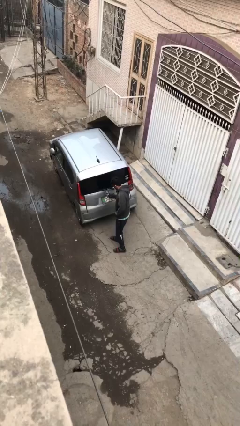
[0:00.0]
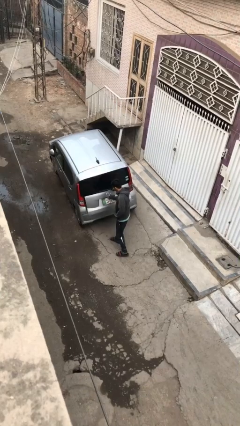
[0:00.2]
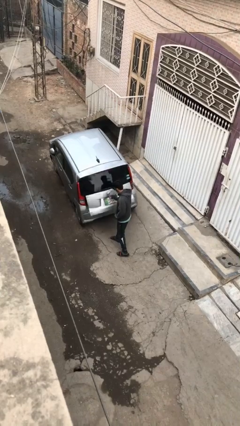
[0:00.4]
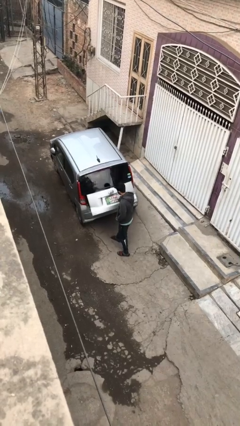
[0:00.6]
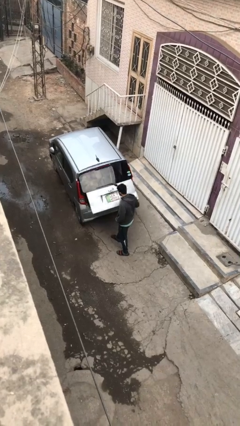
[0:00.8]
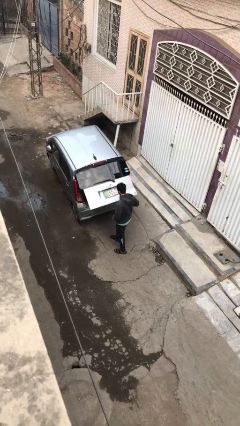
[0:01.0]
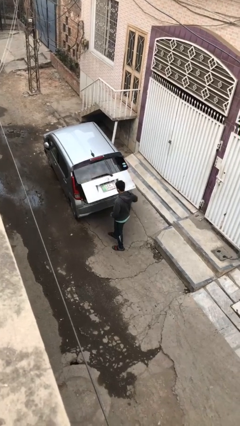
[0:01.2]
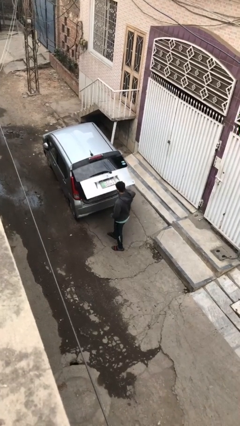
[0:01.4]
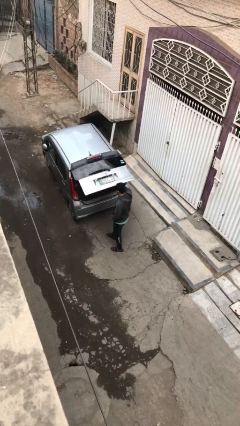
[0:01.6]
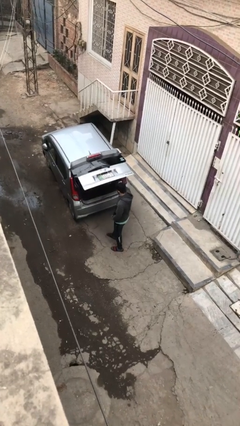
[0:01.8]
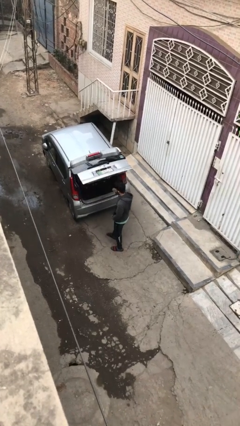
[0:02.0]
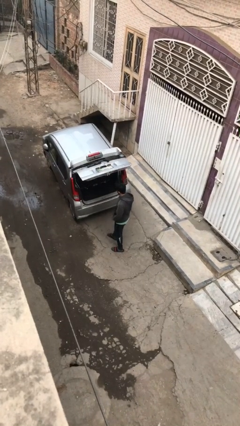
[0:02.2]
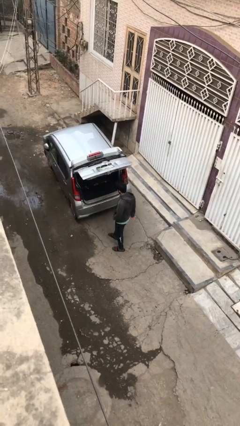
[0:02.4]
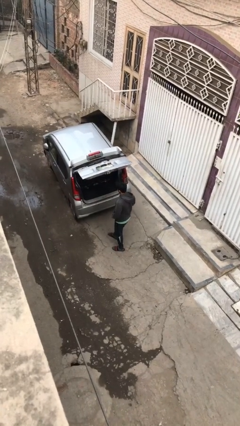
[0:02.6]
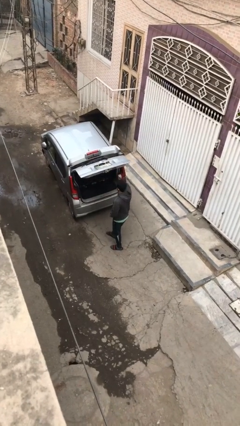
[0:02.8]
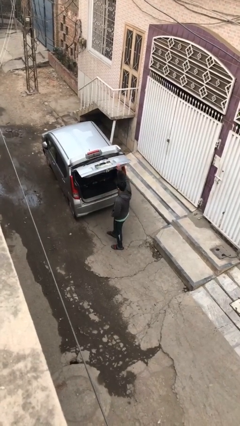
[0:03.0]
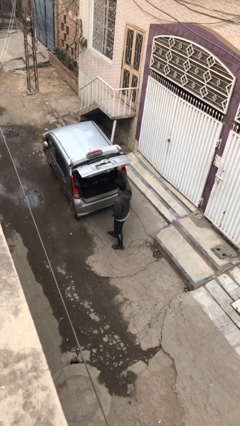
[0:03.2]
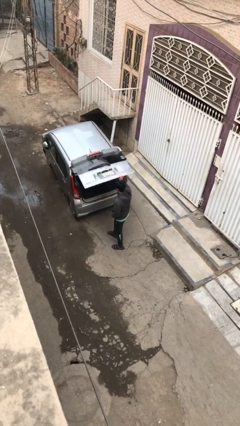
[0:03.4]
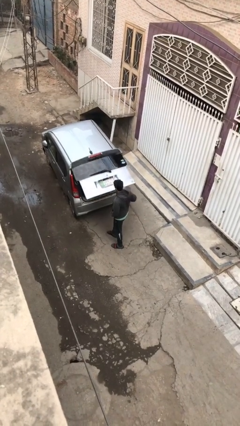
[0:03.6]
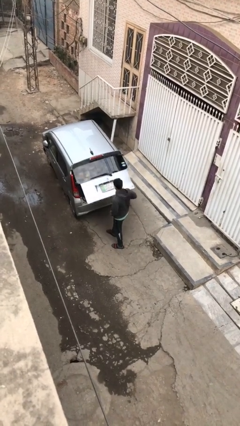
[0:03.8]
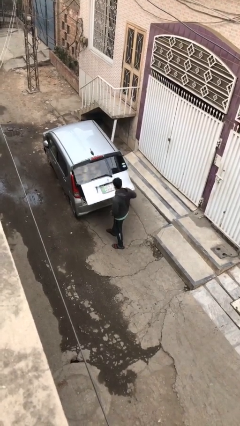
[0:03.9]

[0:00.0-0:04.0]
person opens car trunk

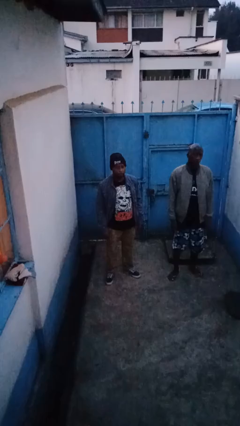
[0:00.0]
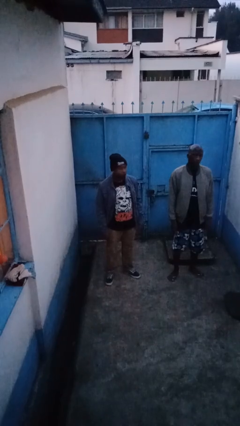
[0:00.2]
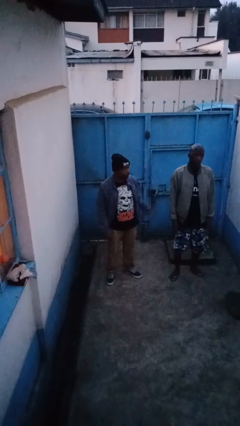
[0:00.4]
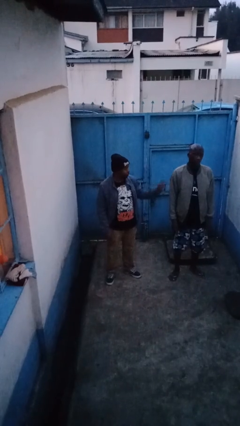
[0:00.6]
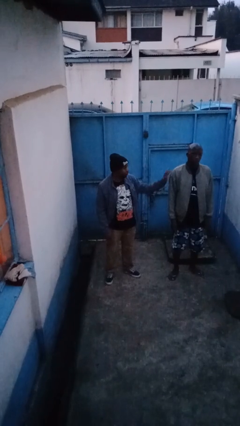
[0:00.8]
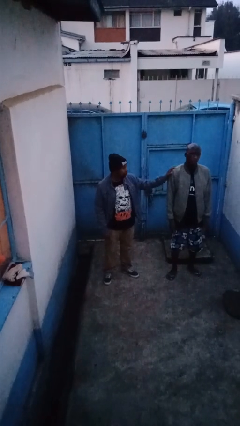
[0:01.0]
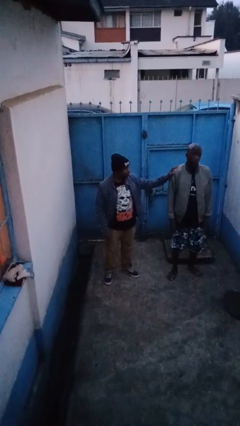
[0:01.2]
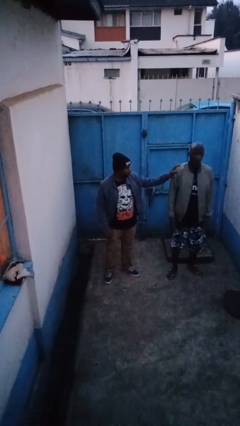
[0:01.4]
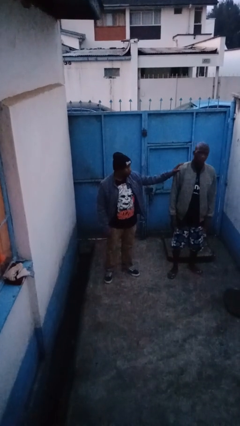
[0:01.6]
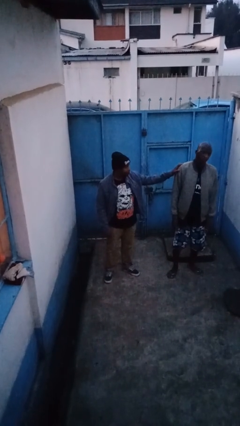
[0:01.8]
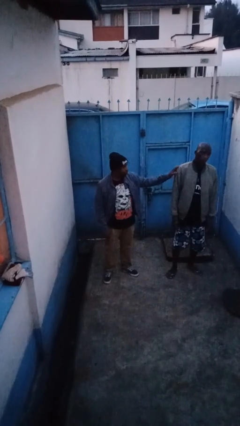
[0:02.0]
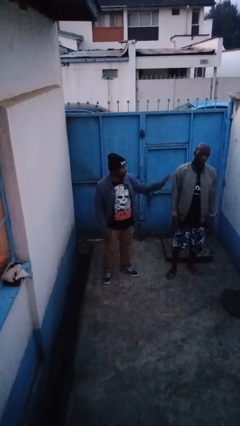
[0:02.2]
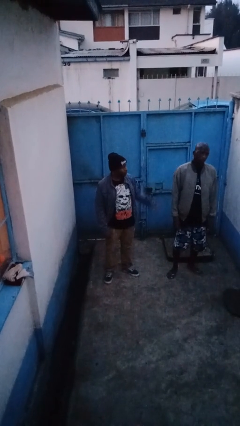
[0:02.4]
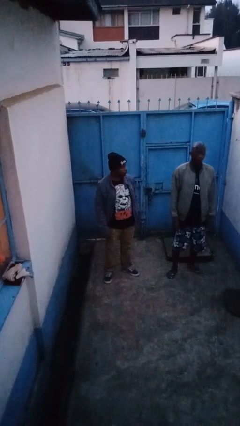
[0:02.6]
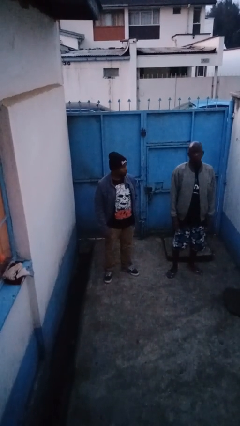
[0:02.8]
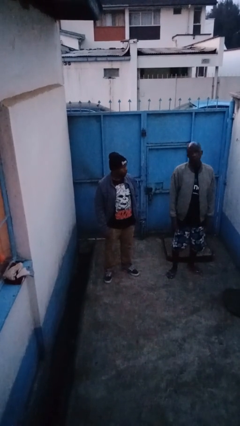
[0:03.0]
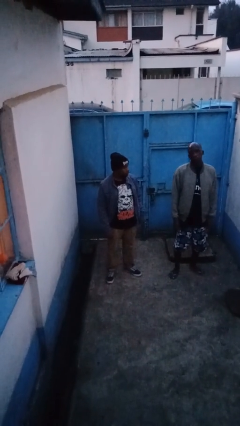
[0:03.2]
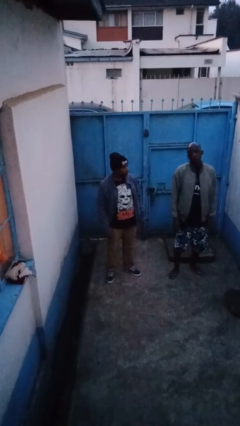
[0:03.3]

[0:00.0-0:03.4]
person shoves person

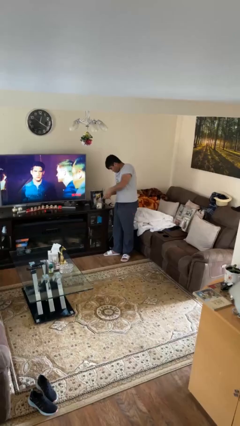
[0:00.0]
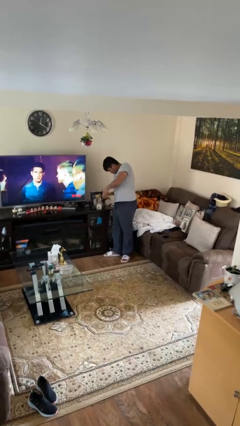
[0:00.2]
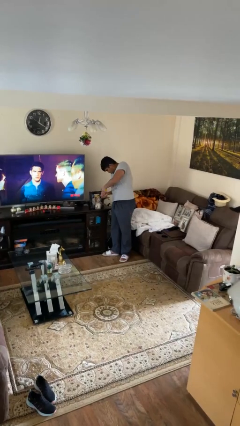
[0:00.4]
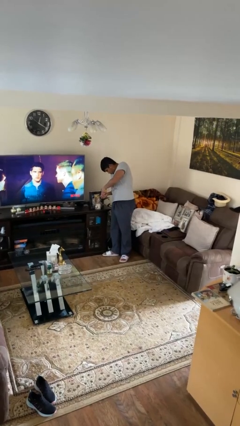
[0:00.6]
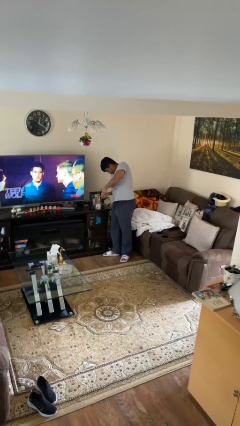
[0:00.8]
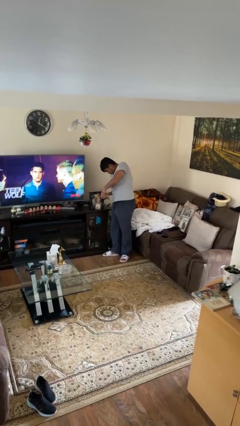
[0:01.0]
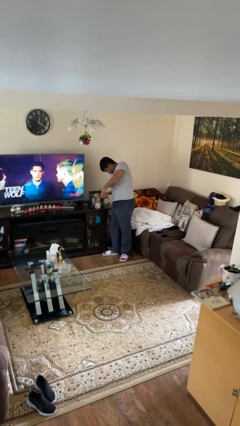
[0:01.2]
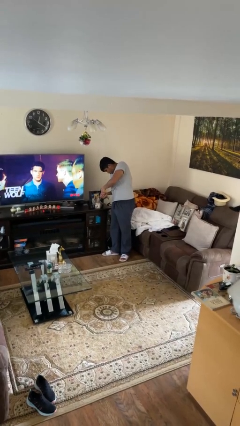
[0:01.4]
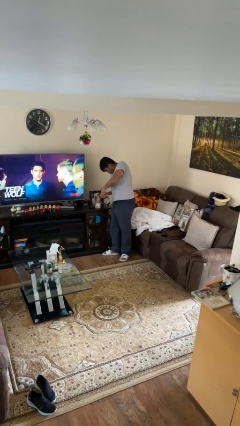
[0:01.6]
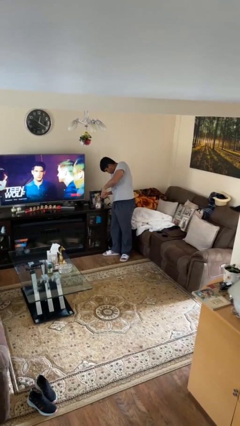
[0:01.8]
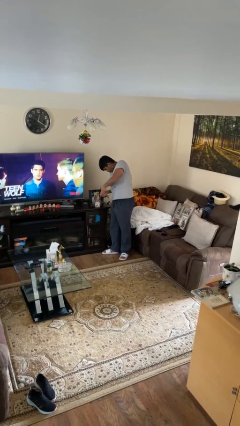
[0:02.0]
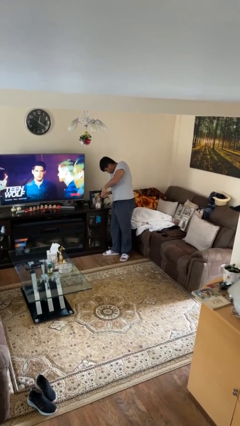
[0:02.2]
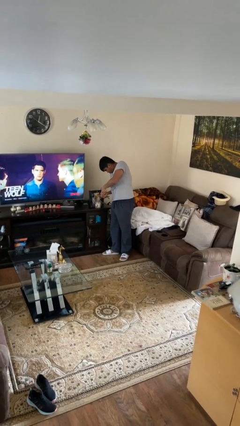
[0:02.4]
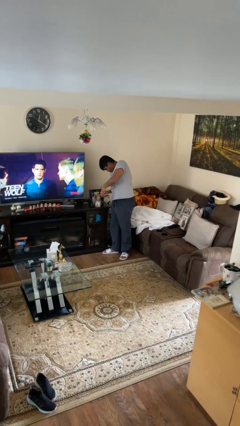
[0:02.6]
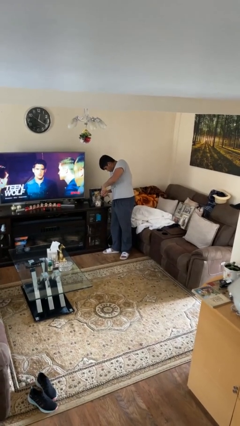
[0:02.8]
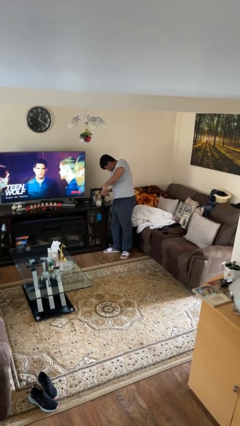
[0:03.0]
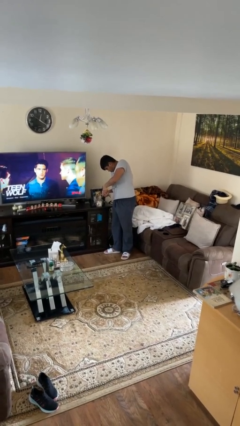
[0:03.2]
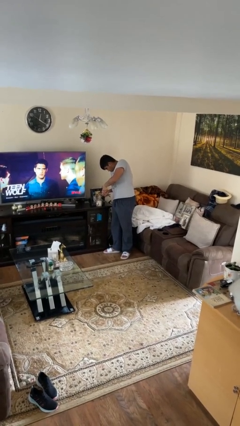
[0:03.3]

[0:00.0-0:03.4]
person lights candle

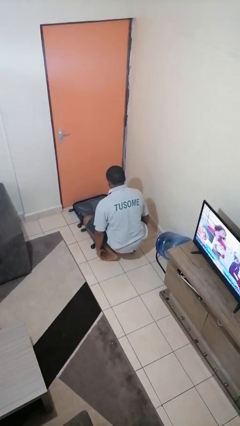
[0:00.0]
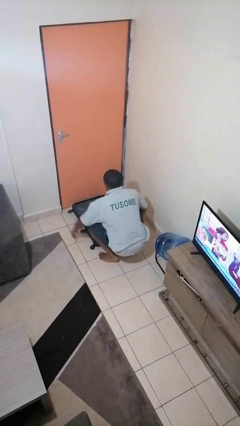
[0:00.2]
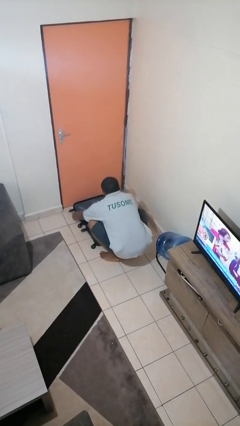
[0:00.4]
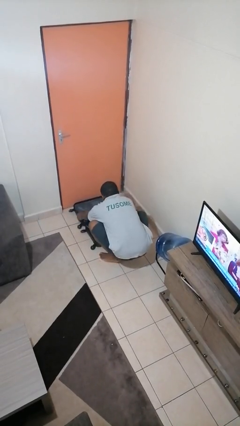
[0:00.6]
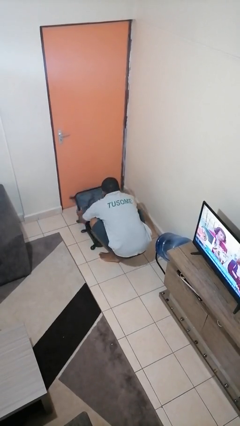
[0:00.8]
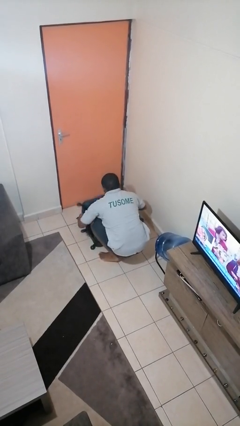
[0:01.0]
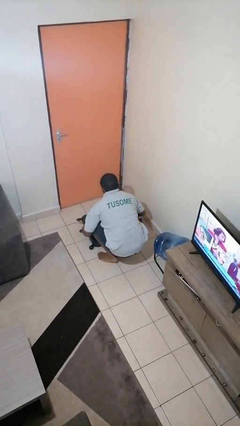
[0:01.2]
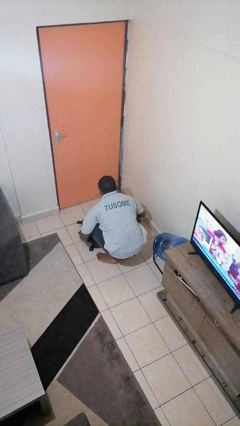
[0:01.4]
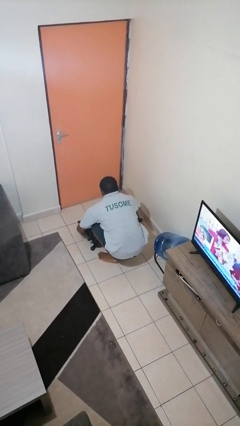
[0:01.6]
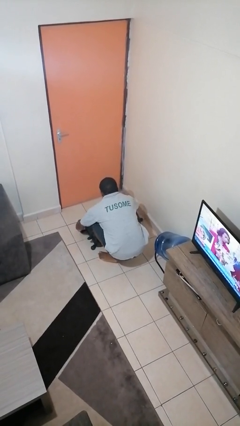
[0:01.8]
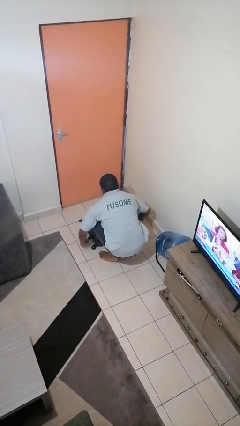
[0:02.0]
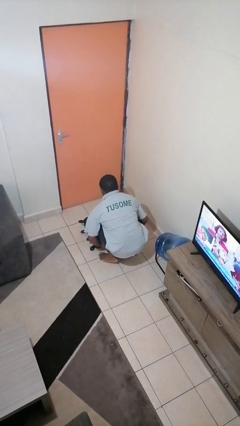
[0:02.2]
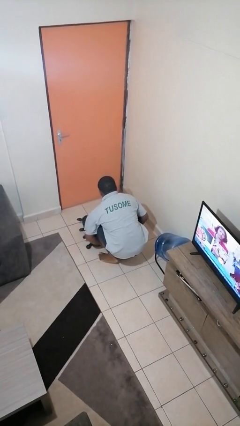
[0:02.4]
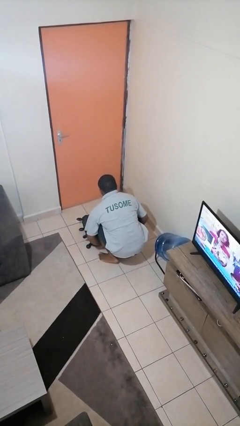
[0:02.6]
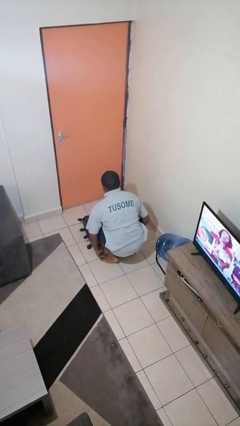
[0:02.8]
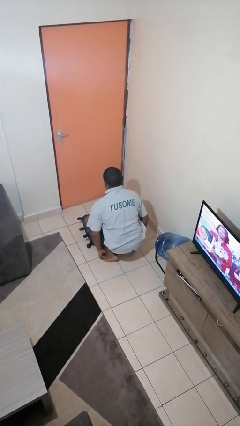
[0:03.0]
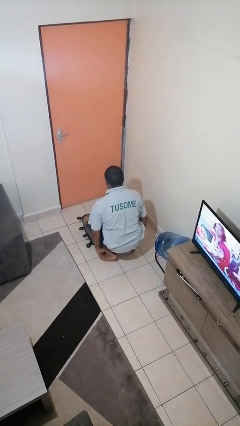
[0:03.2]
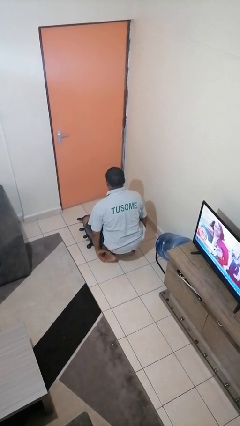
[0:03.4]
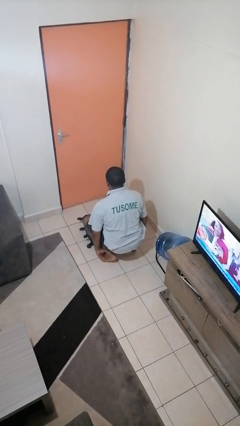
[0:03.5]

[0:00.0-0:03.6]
person closes suitcase

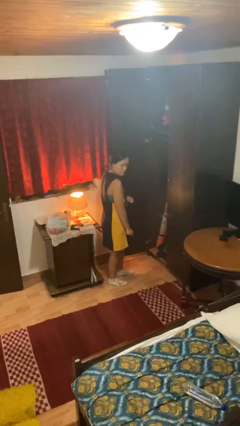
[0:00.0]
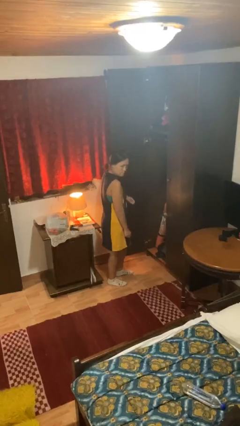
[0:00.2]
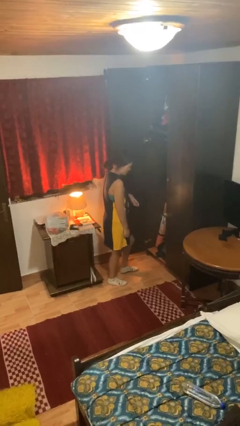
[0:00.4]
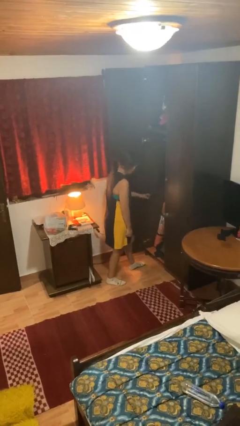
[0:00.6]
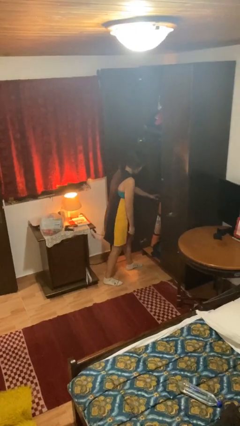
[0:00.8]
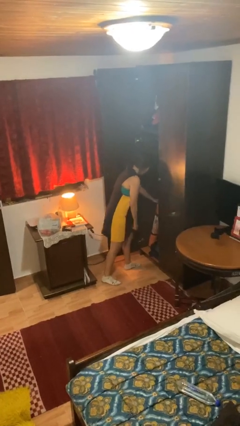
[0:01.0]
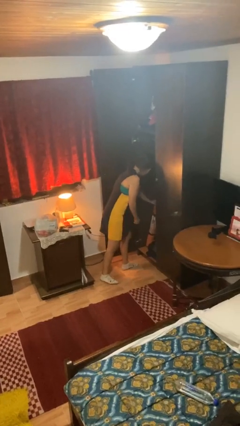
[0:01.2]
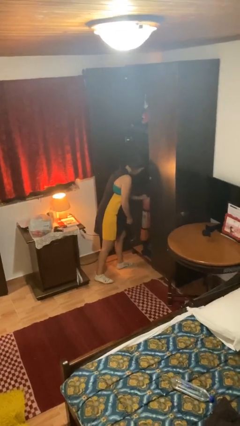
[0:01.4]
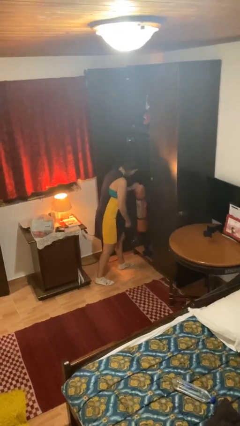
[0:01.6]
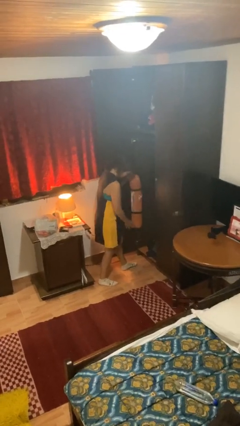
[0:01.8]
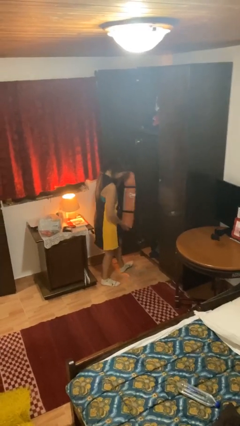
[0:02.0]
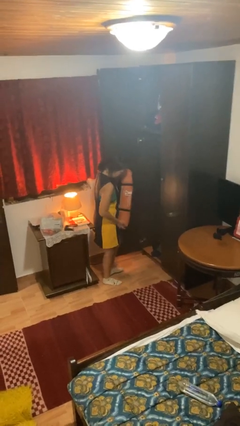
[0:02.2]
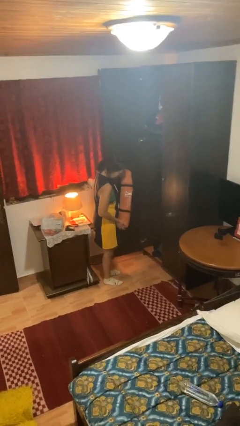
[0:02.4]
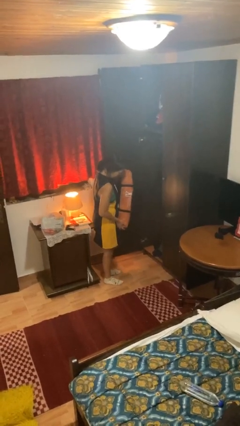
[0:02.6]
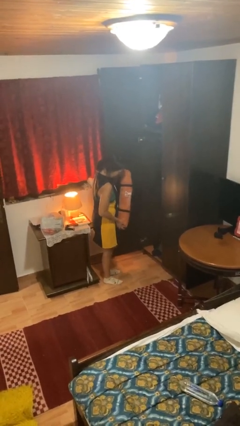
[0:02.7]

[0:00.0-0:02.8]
person picks up object from cabinet

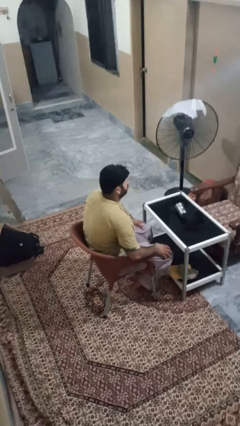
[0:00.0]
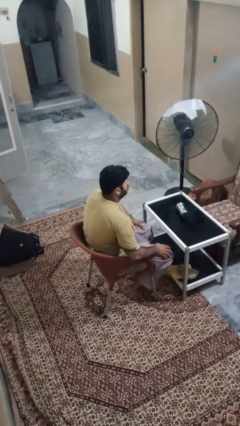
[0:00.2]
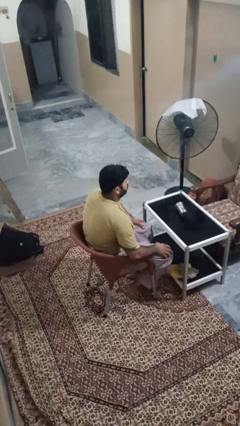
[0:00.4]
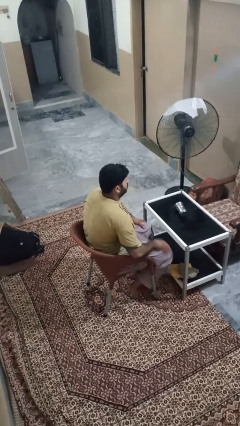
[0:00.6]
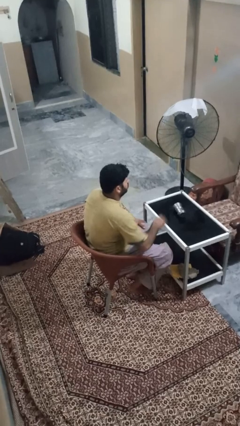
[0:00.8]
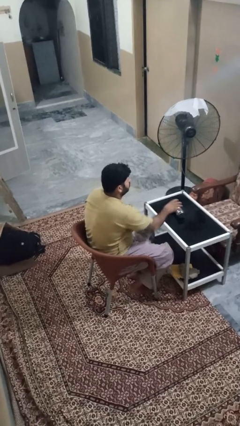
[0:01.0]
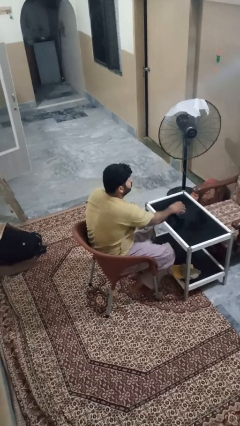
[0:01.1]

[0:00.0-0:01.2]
person sets upright glass
